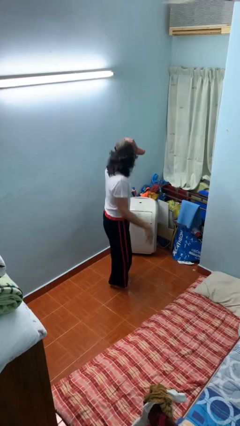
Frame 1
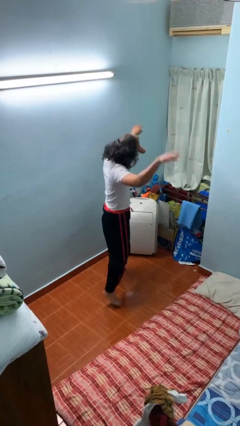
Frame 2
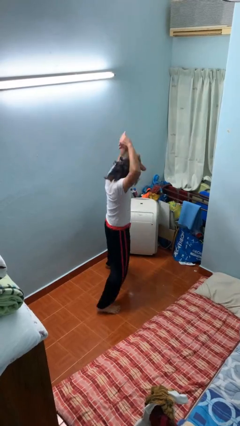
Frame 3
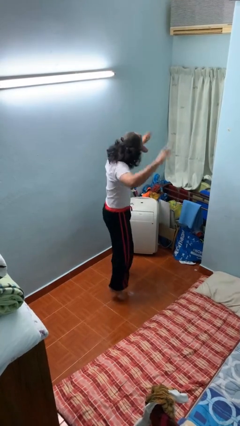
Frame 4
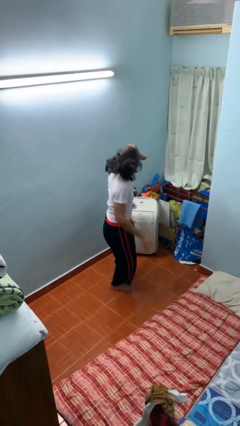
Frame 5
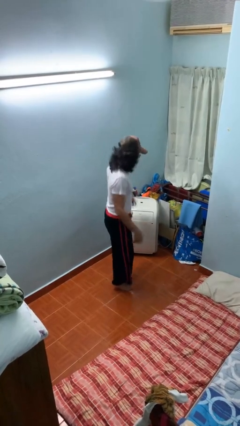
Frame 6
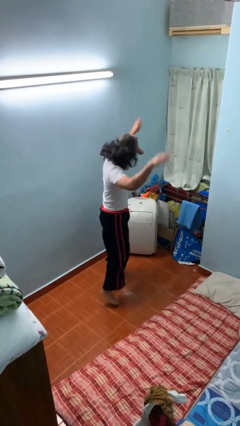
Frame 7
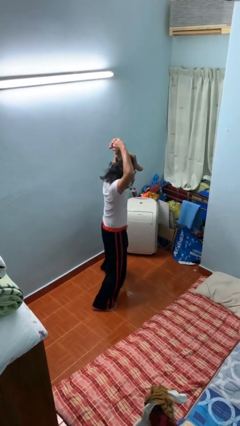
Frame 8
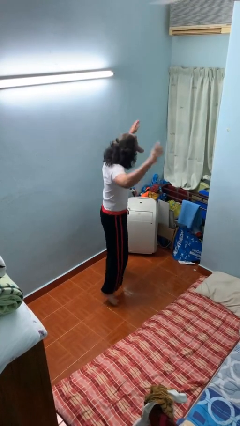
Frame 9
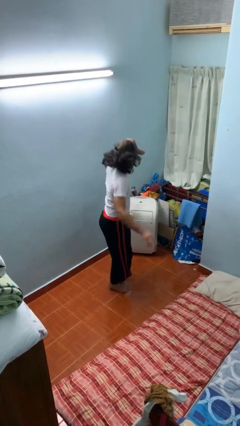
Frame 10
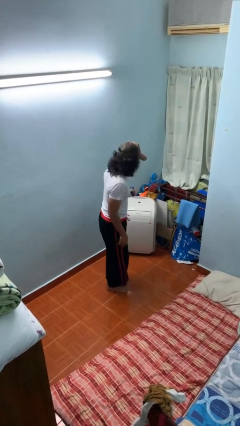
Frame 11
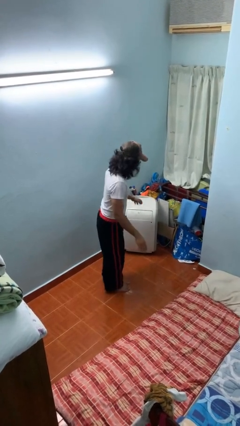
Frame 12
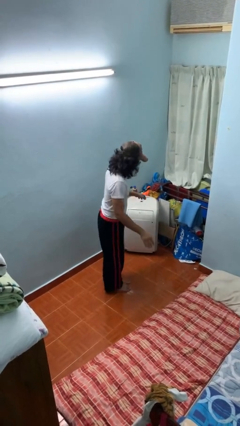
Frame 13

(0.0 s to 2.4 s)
person exercises with jumping jacks

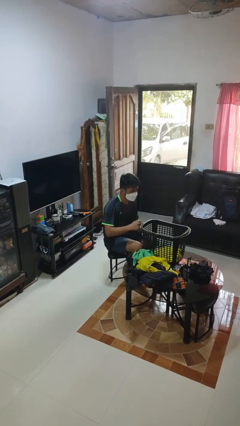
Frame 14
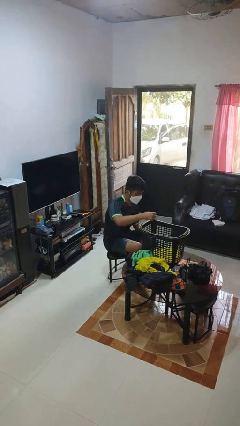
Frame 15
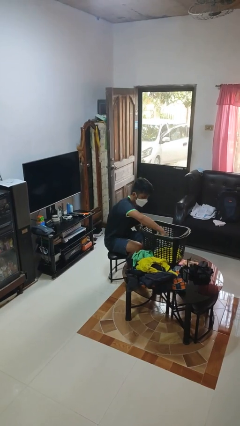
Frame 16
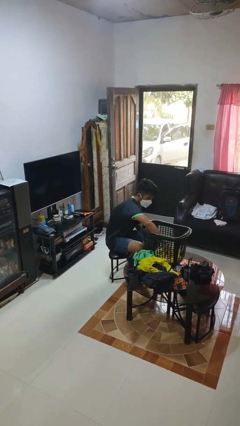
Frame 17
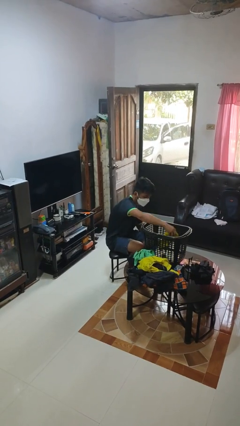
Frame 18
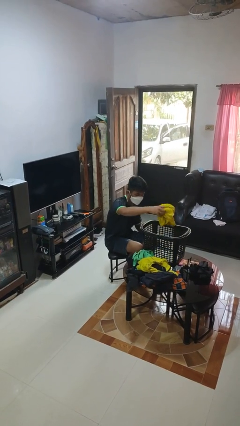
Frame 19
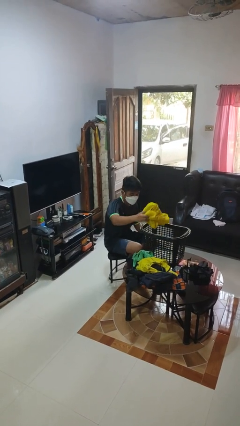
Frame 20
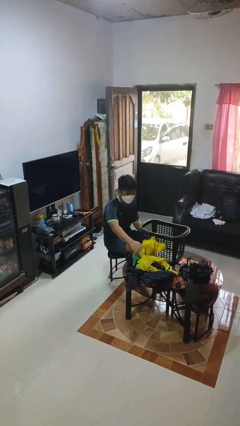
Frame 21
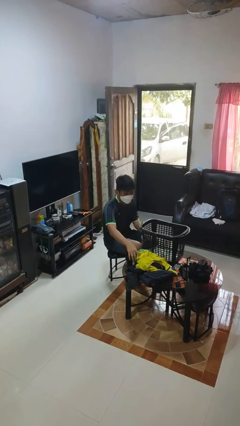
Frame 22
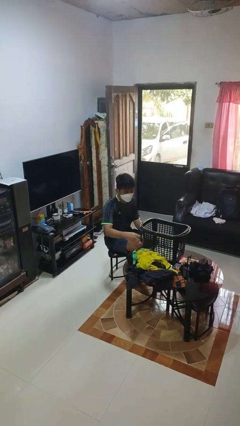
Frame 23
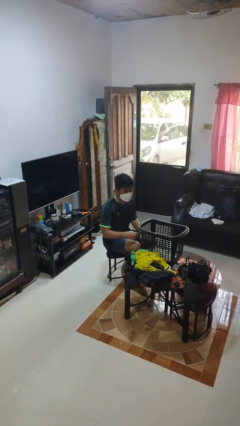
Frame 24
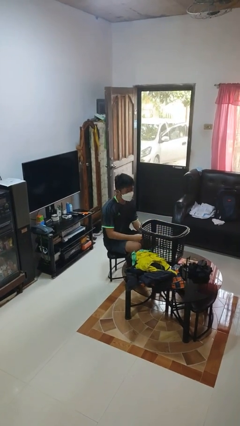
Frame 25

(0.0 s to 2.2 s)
person takes object from basket

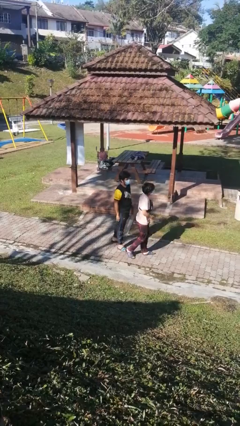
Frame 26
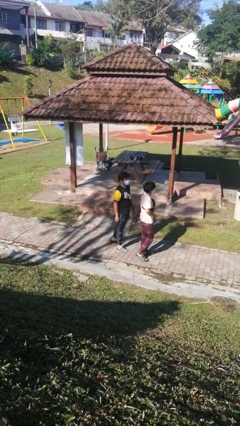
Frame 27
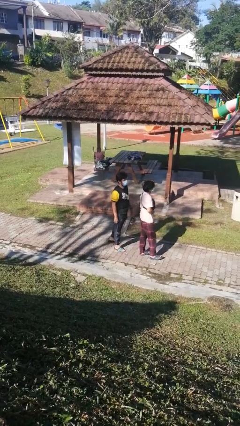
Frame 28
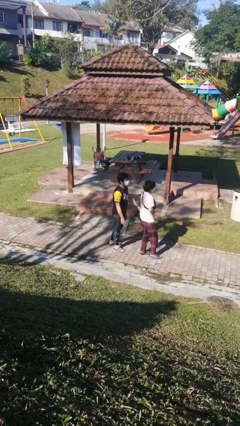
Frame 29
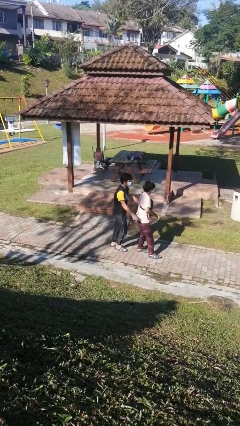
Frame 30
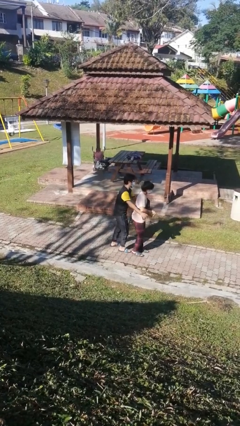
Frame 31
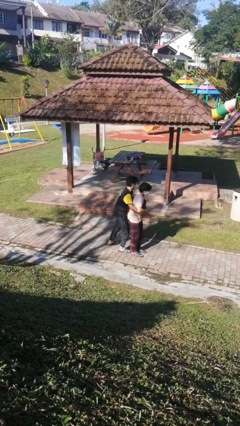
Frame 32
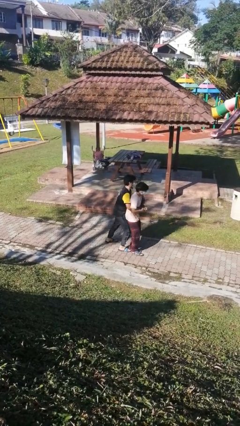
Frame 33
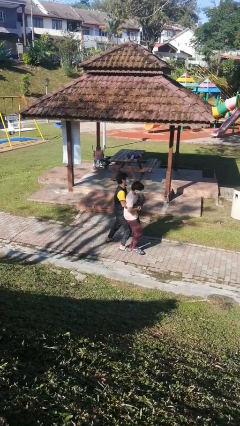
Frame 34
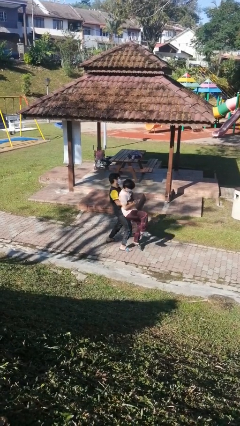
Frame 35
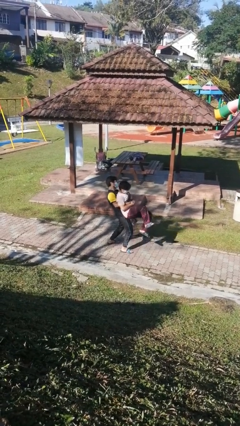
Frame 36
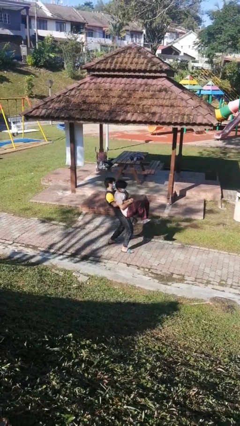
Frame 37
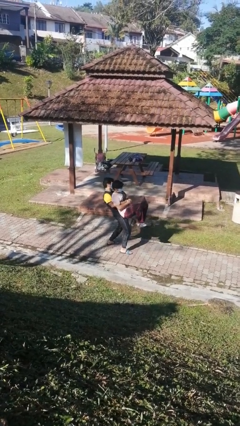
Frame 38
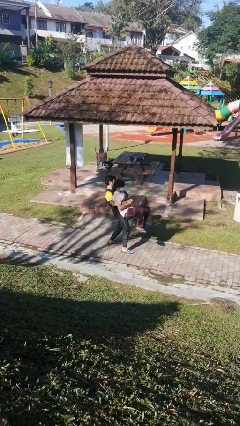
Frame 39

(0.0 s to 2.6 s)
person picks up person

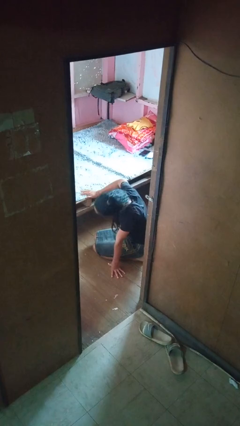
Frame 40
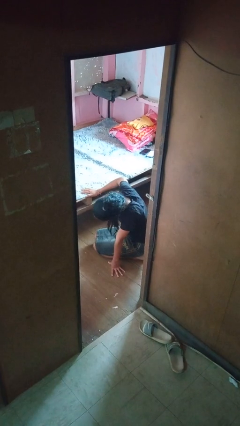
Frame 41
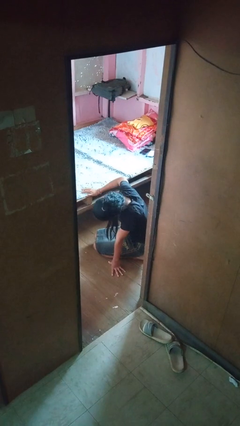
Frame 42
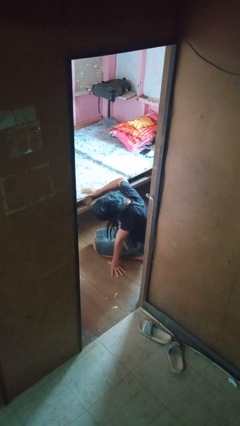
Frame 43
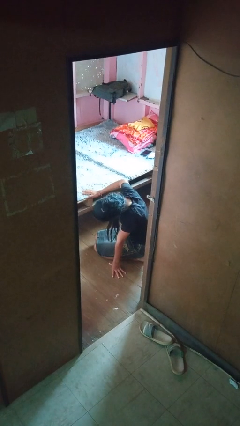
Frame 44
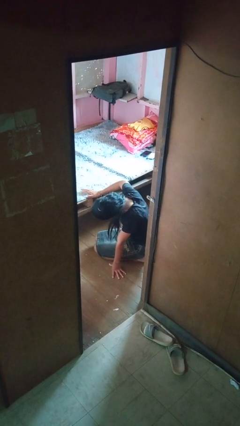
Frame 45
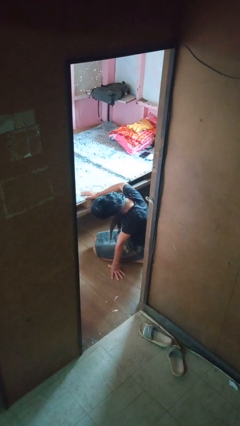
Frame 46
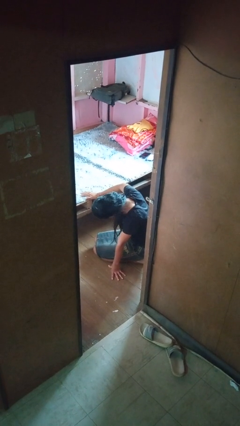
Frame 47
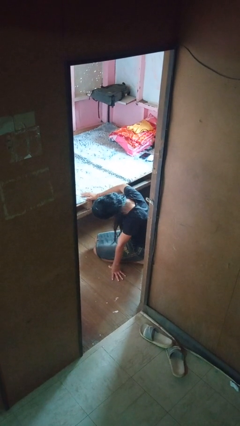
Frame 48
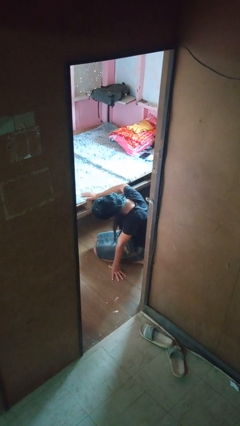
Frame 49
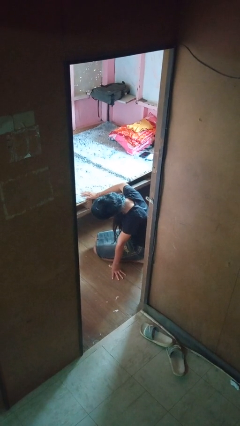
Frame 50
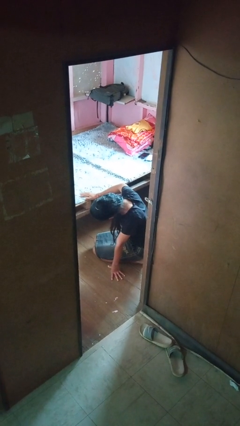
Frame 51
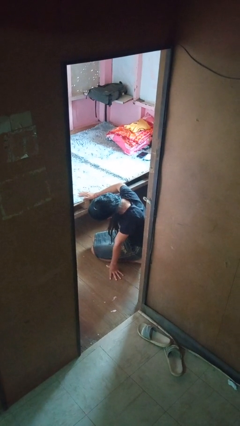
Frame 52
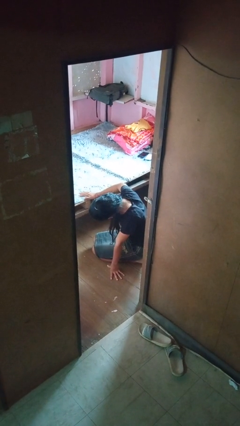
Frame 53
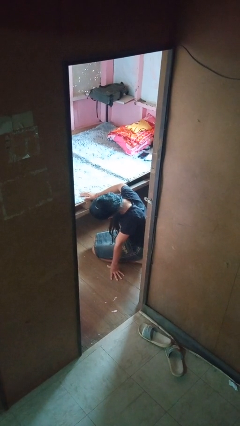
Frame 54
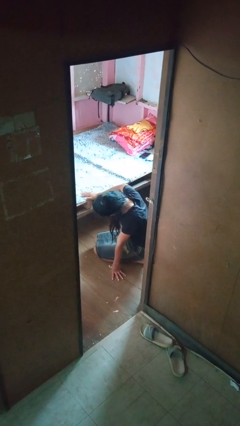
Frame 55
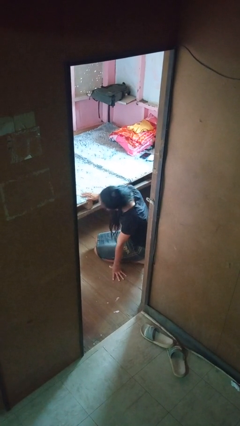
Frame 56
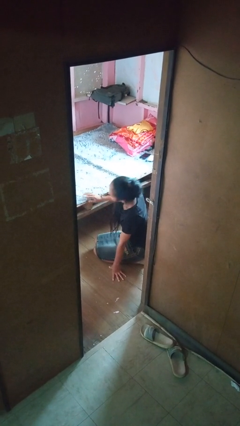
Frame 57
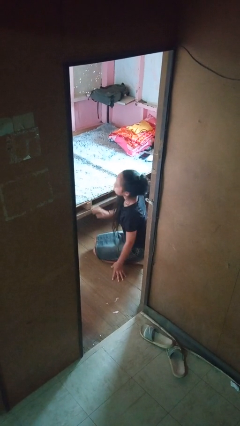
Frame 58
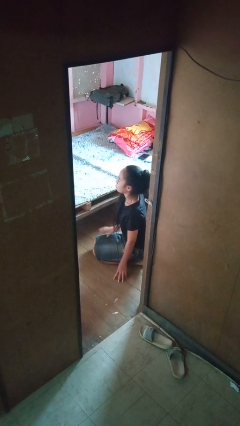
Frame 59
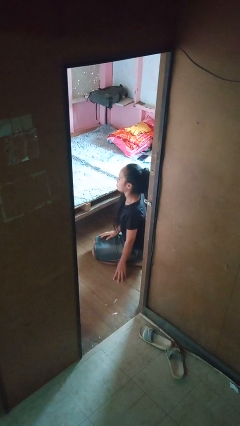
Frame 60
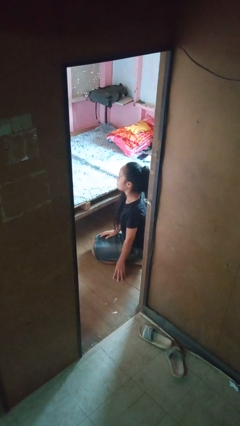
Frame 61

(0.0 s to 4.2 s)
person searches under bed

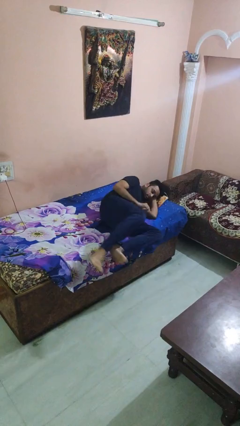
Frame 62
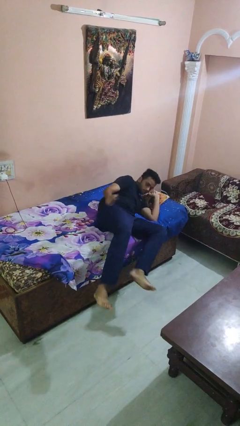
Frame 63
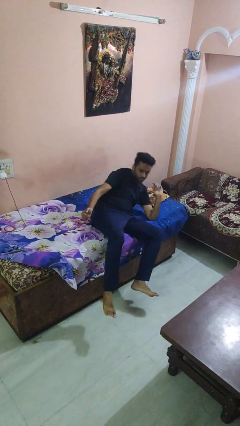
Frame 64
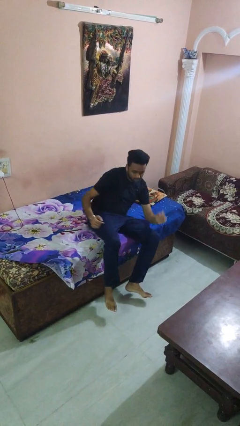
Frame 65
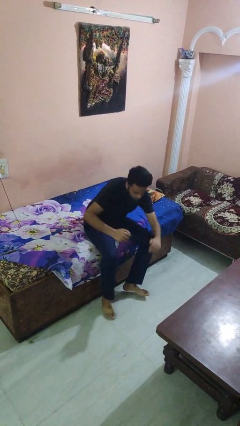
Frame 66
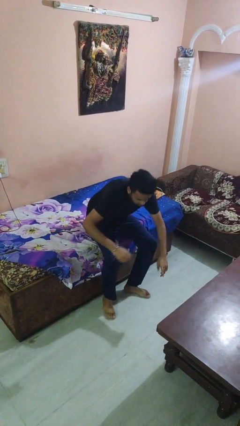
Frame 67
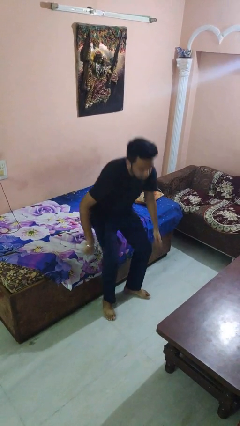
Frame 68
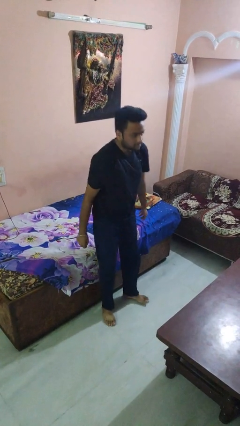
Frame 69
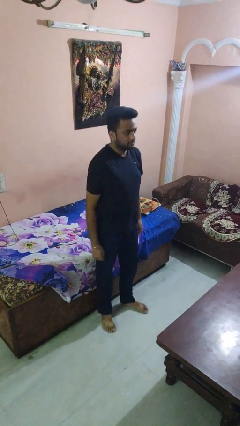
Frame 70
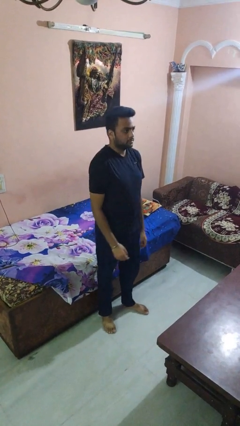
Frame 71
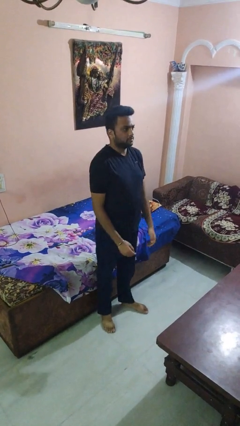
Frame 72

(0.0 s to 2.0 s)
person stands up

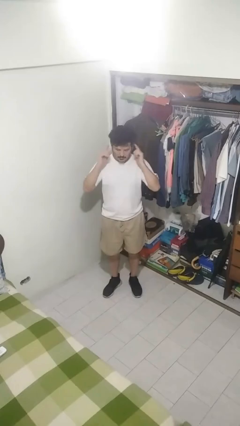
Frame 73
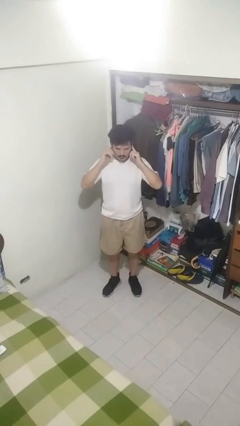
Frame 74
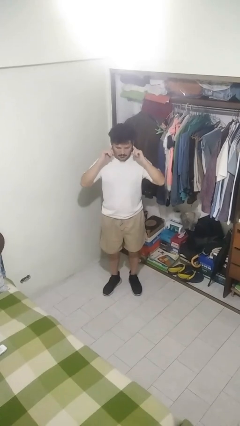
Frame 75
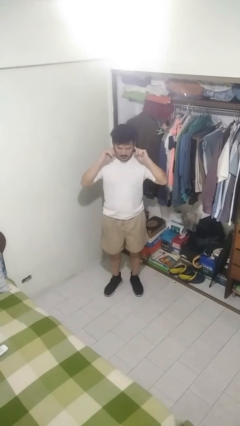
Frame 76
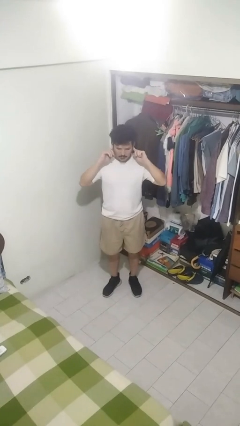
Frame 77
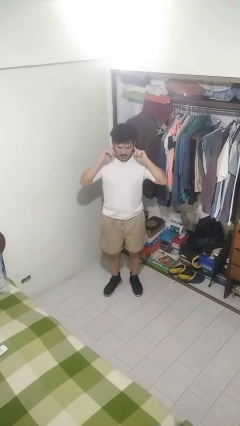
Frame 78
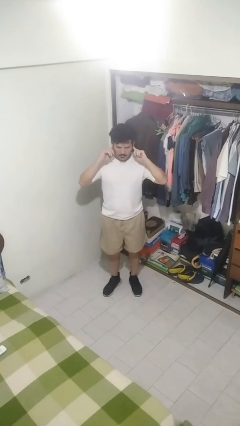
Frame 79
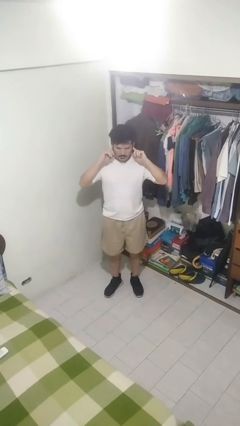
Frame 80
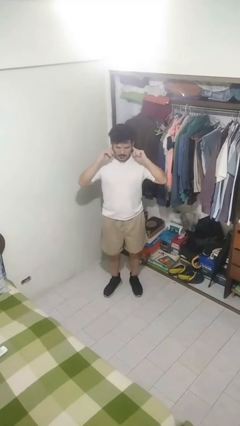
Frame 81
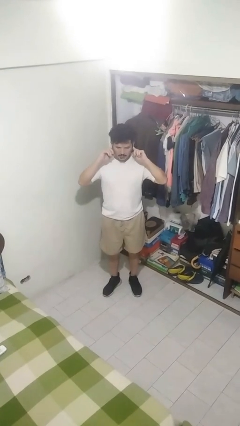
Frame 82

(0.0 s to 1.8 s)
person puts fingers in ear

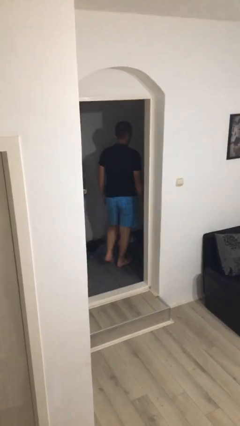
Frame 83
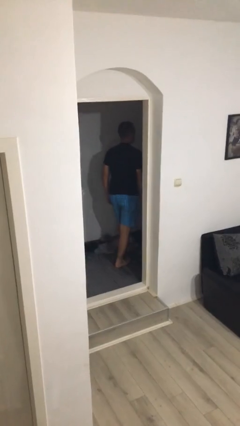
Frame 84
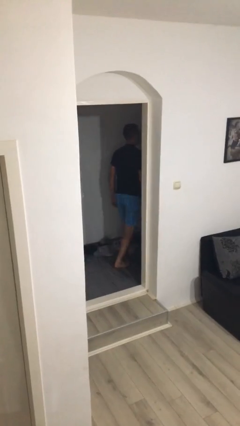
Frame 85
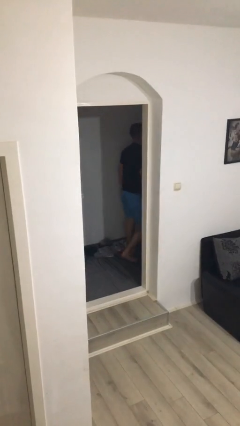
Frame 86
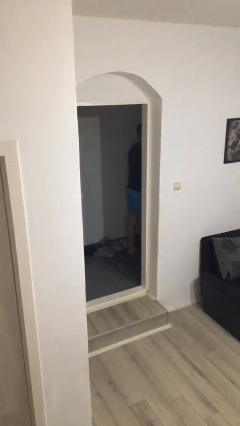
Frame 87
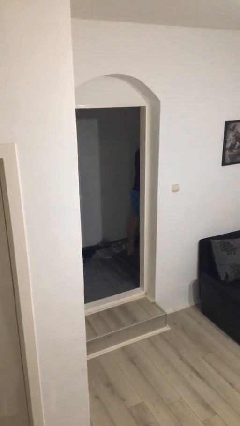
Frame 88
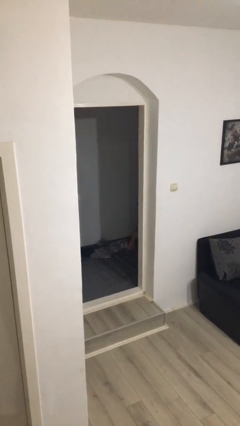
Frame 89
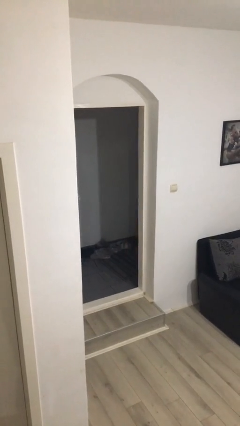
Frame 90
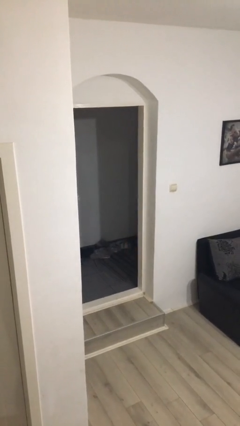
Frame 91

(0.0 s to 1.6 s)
person exits scene through structure

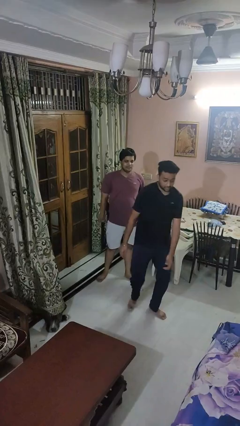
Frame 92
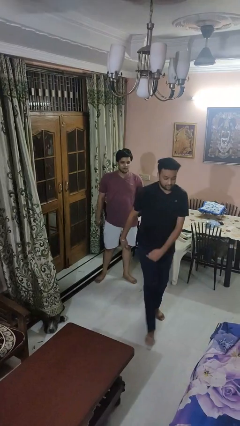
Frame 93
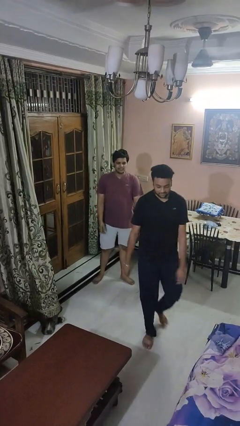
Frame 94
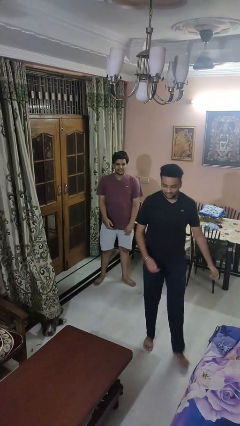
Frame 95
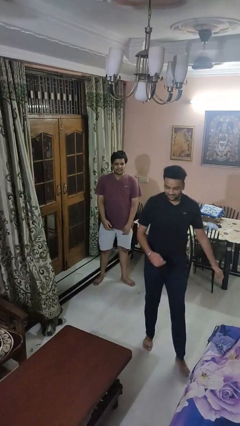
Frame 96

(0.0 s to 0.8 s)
person shoves person
